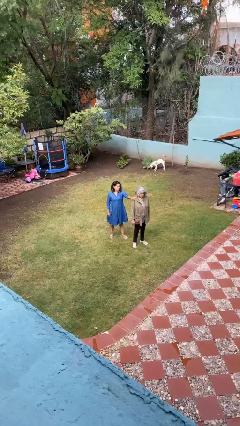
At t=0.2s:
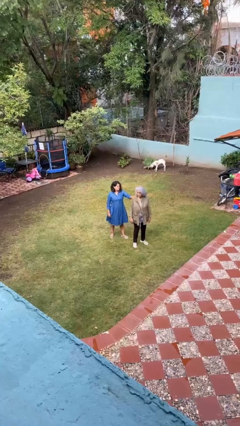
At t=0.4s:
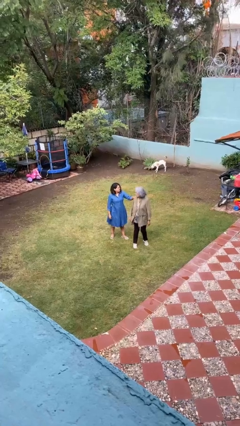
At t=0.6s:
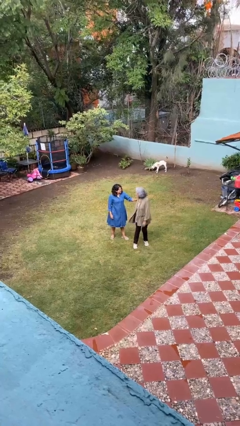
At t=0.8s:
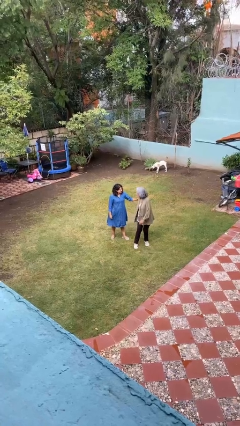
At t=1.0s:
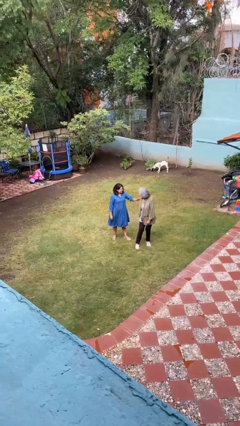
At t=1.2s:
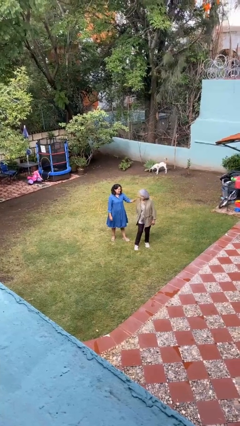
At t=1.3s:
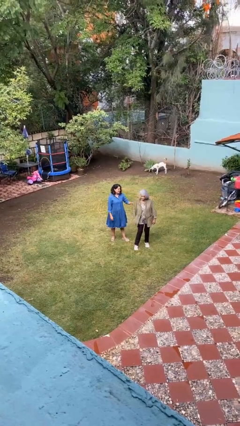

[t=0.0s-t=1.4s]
person spins person around

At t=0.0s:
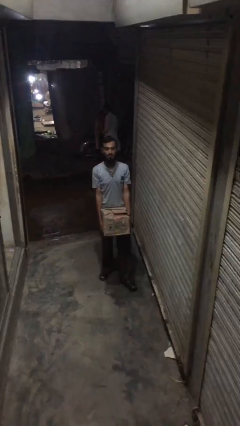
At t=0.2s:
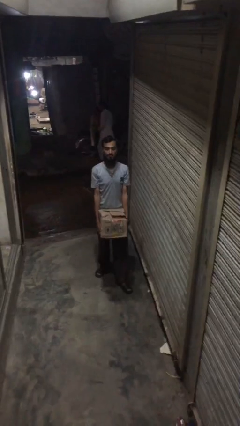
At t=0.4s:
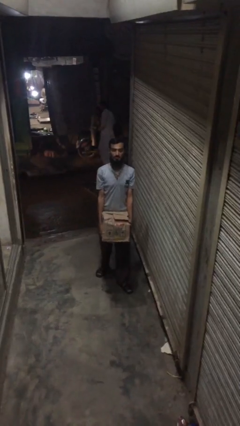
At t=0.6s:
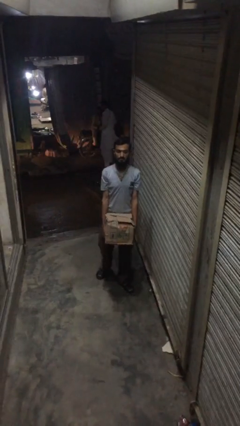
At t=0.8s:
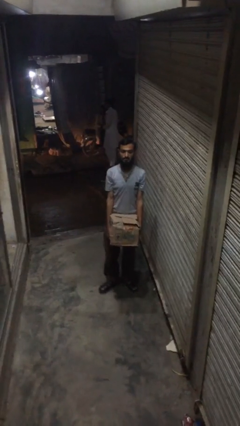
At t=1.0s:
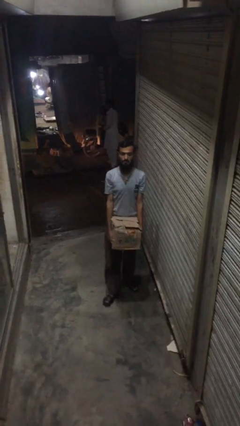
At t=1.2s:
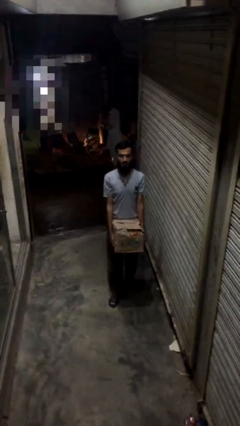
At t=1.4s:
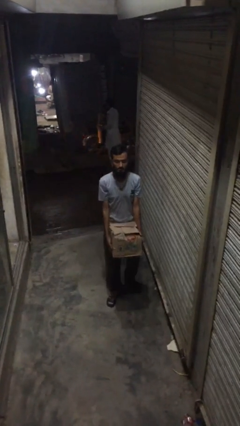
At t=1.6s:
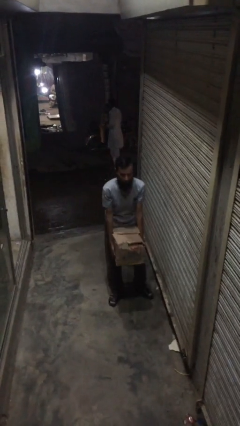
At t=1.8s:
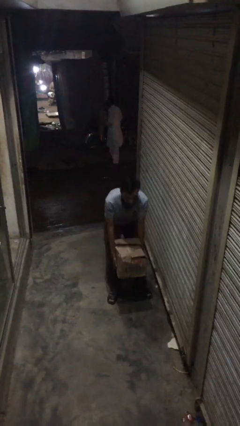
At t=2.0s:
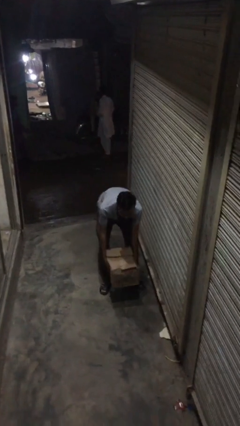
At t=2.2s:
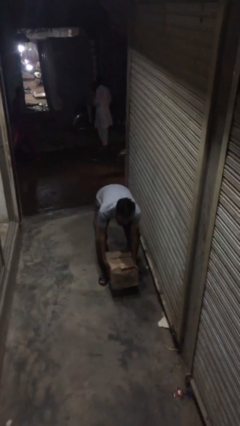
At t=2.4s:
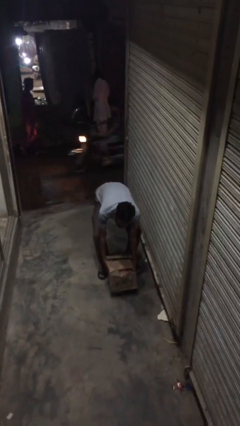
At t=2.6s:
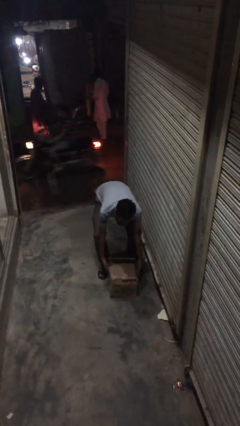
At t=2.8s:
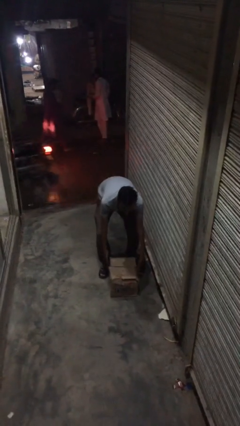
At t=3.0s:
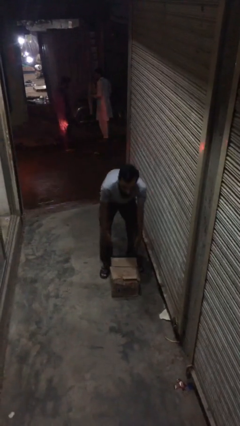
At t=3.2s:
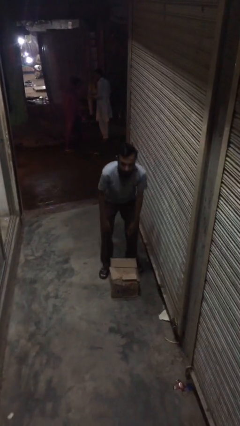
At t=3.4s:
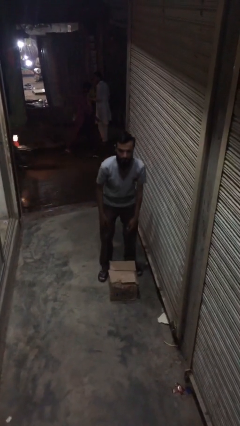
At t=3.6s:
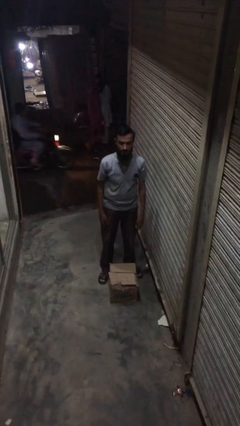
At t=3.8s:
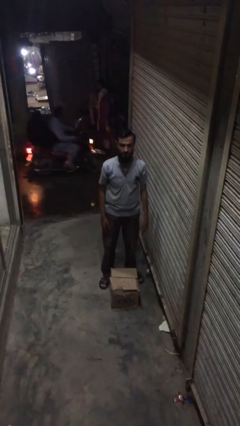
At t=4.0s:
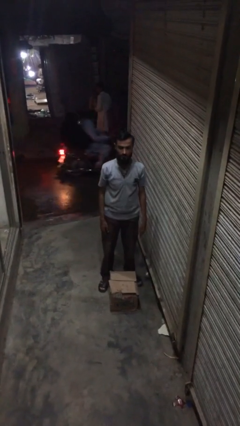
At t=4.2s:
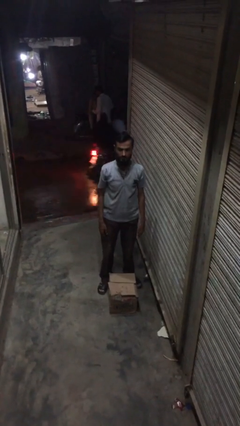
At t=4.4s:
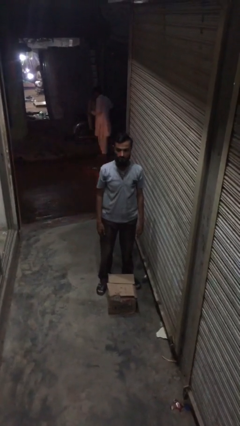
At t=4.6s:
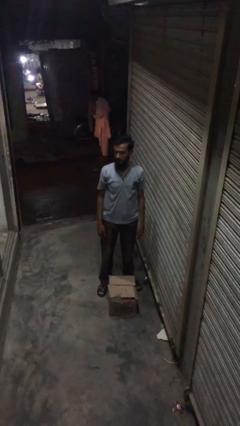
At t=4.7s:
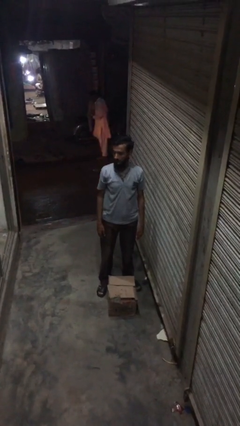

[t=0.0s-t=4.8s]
person puts down object on floor

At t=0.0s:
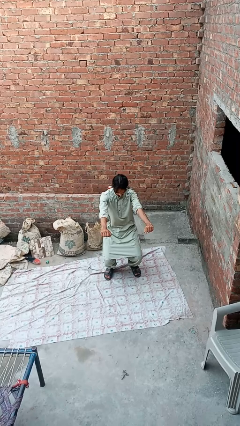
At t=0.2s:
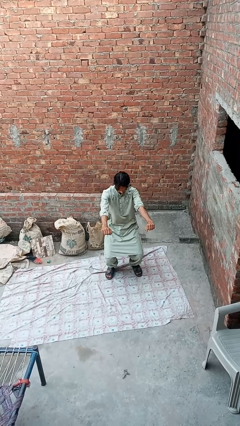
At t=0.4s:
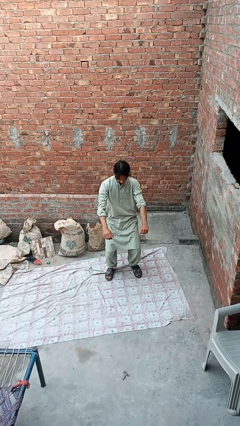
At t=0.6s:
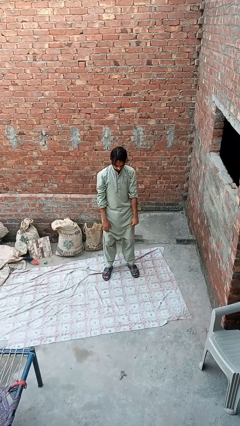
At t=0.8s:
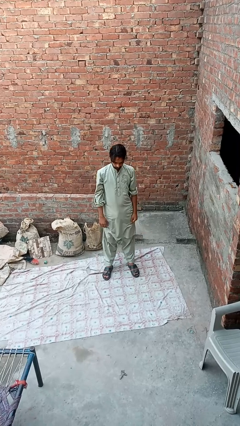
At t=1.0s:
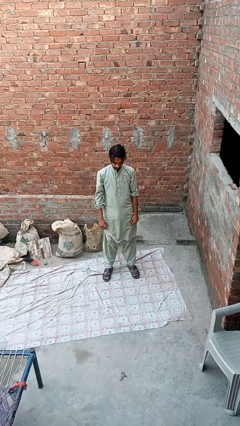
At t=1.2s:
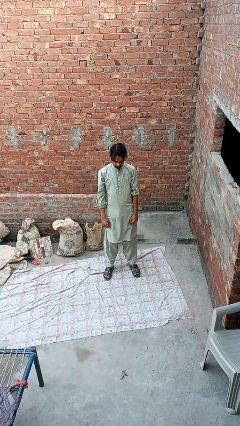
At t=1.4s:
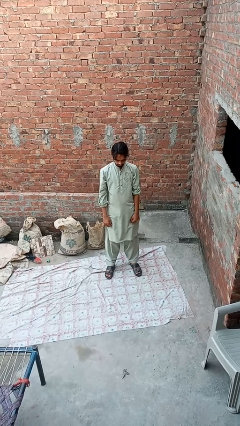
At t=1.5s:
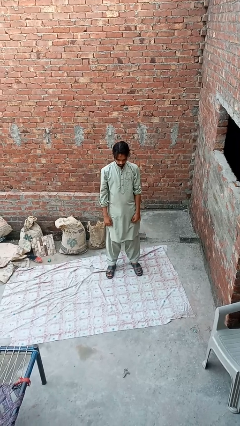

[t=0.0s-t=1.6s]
person stands up

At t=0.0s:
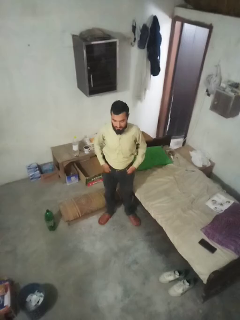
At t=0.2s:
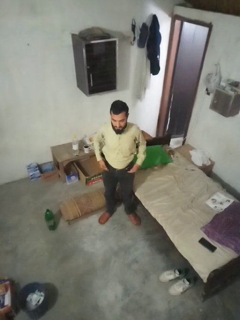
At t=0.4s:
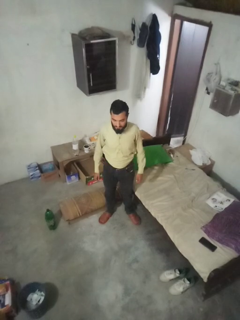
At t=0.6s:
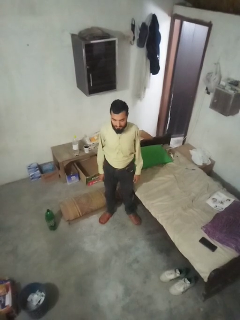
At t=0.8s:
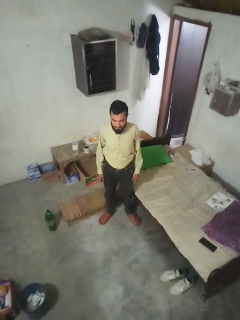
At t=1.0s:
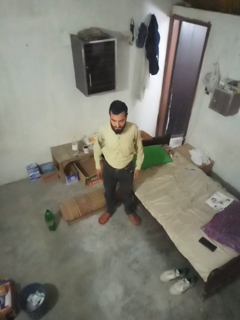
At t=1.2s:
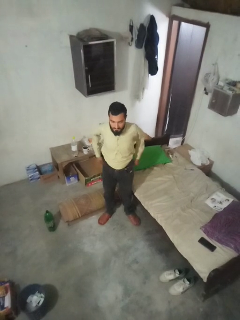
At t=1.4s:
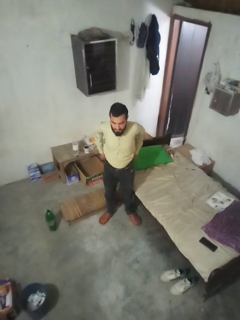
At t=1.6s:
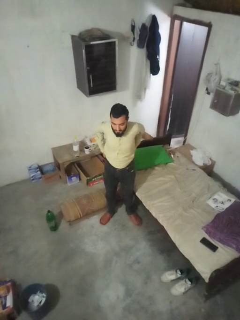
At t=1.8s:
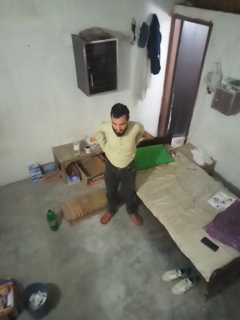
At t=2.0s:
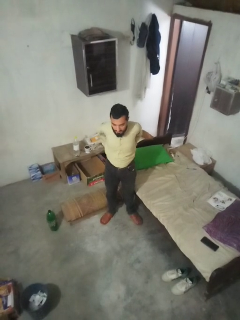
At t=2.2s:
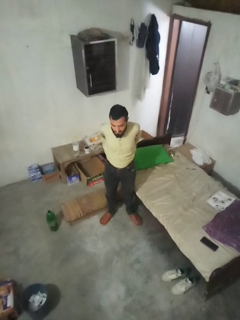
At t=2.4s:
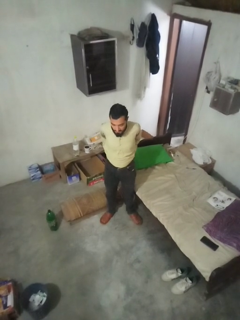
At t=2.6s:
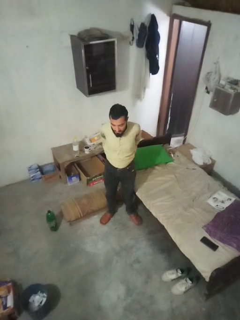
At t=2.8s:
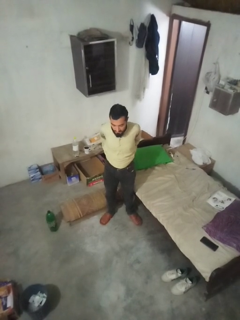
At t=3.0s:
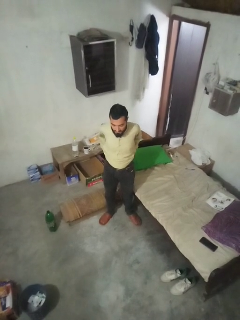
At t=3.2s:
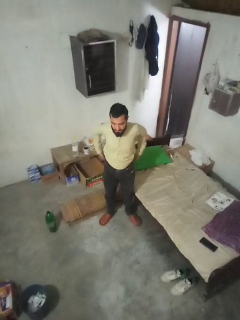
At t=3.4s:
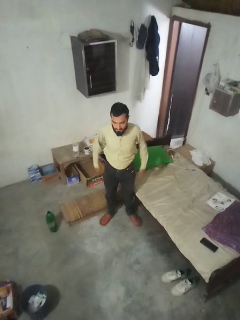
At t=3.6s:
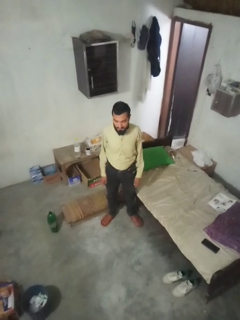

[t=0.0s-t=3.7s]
person puts hands in back pockets

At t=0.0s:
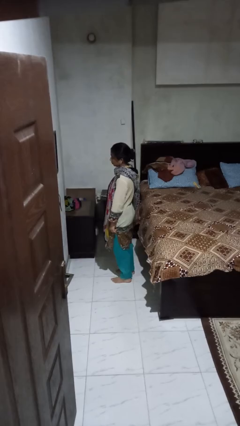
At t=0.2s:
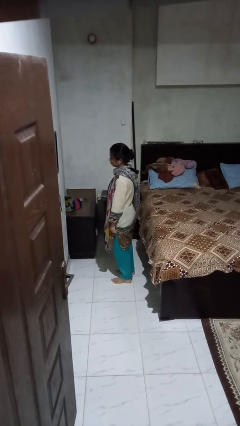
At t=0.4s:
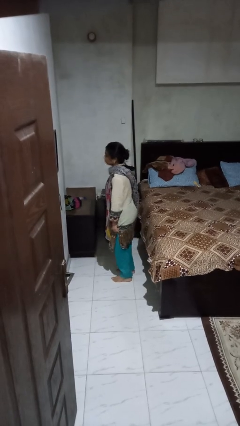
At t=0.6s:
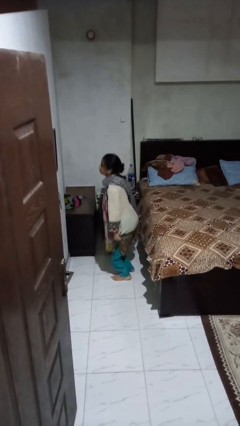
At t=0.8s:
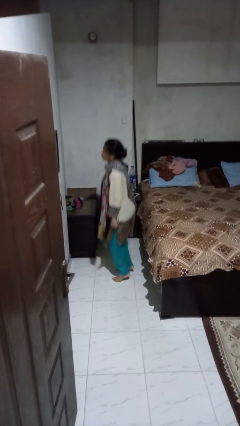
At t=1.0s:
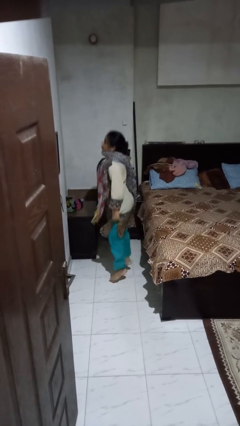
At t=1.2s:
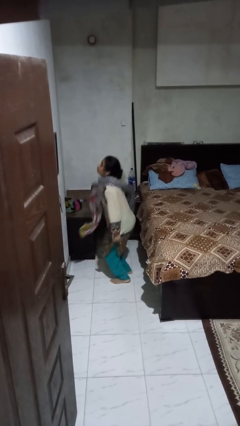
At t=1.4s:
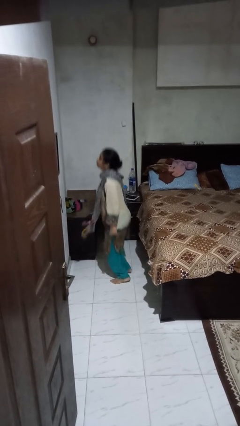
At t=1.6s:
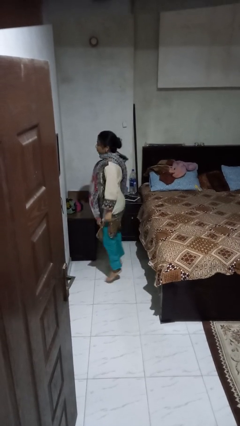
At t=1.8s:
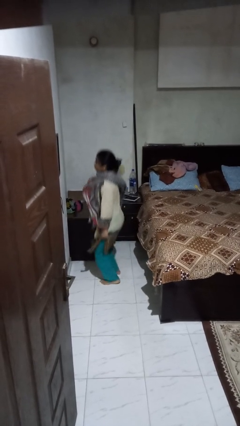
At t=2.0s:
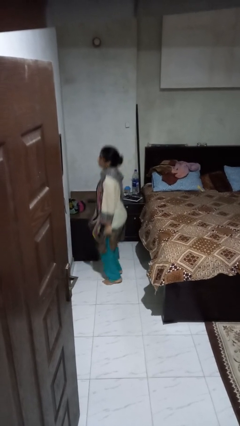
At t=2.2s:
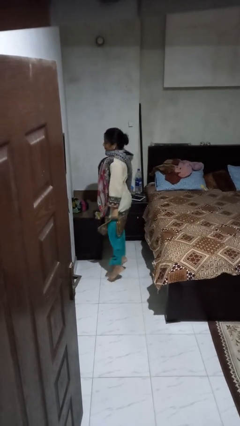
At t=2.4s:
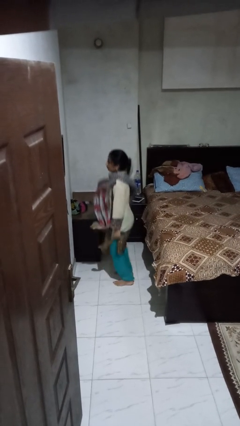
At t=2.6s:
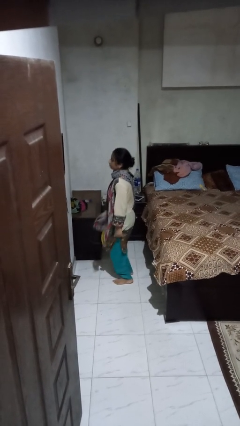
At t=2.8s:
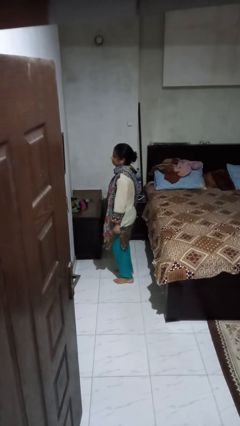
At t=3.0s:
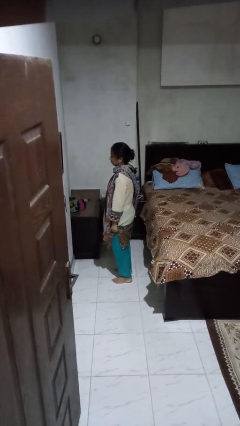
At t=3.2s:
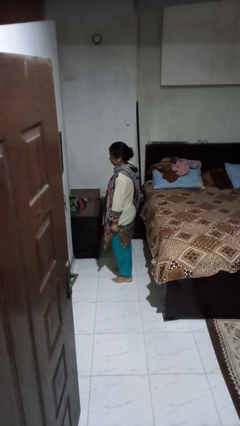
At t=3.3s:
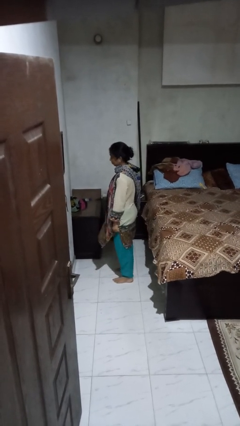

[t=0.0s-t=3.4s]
person jumps

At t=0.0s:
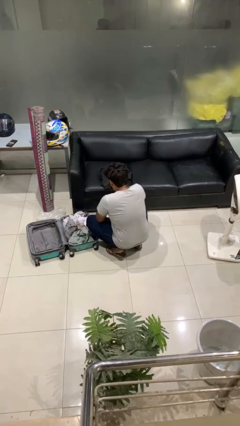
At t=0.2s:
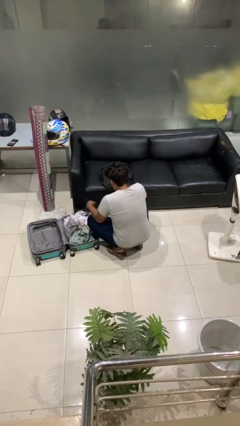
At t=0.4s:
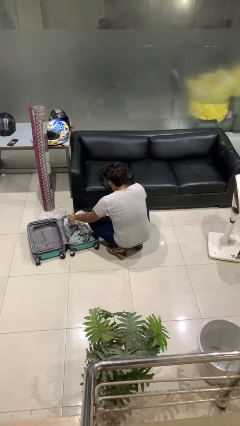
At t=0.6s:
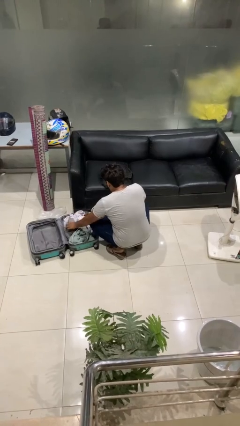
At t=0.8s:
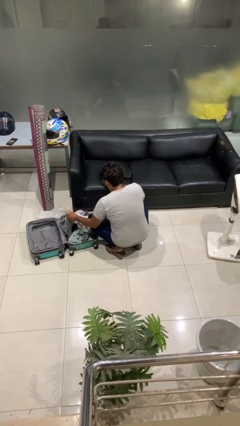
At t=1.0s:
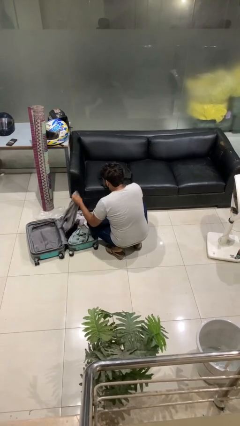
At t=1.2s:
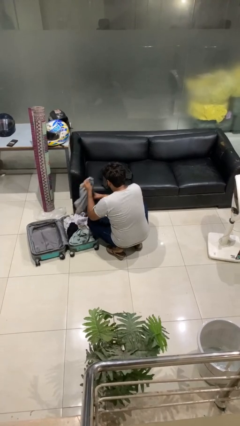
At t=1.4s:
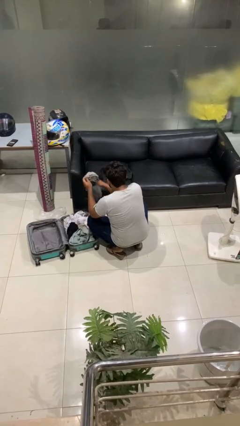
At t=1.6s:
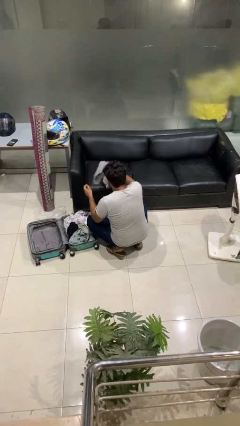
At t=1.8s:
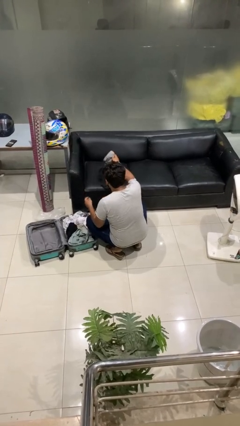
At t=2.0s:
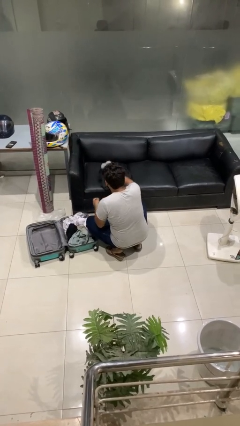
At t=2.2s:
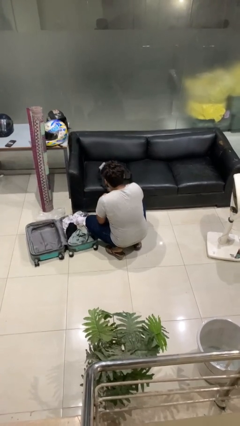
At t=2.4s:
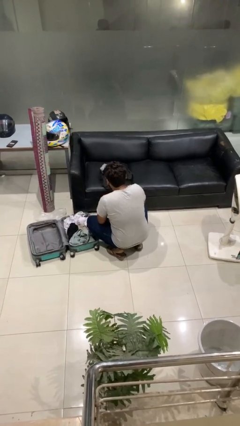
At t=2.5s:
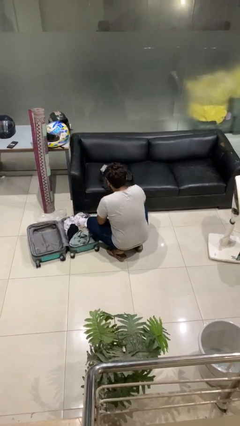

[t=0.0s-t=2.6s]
person unloads clothes from suitcase

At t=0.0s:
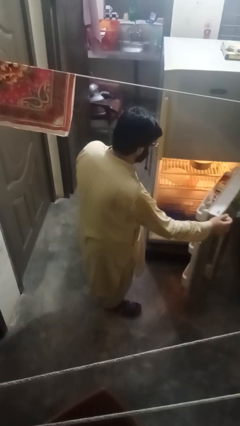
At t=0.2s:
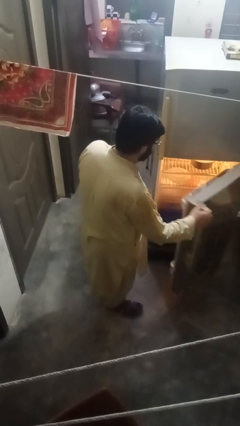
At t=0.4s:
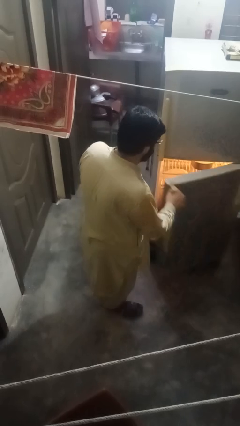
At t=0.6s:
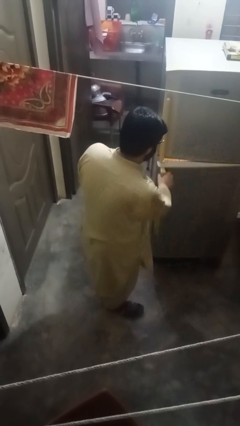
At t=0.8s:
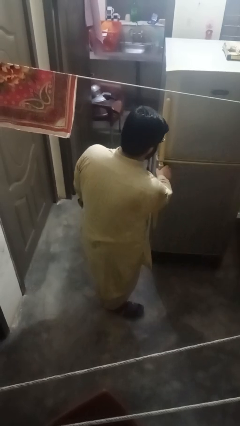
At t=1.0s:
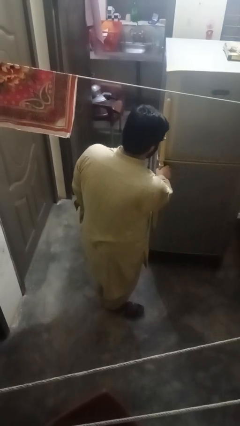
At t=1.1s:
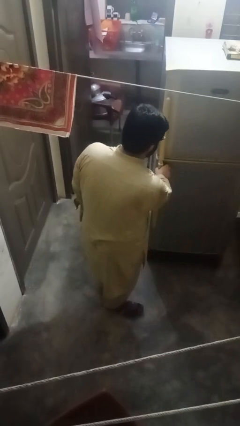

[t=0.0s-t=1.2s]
person closes refrigerator
